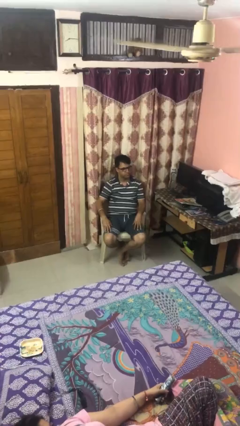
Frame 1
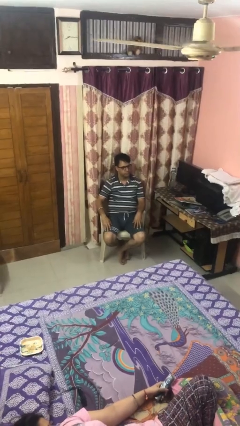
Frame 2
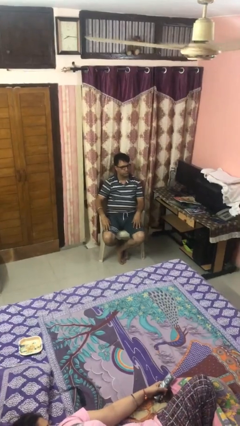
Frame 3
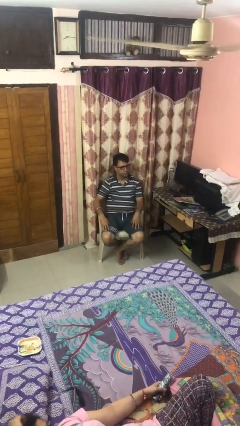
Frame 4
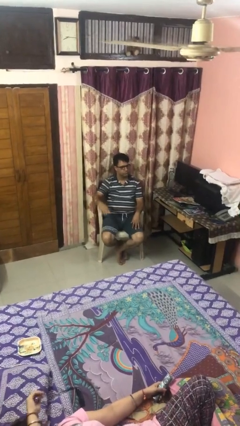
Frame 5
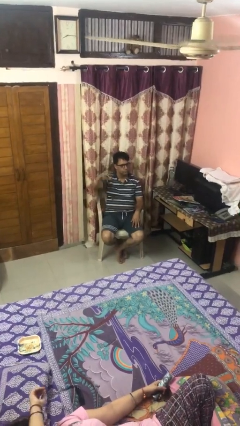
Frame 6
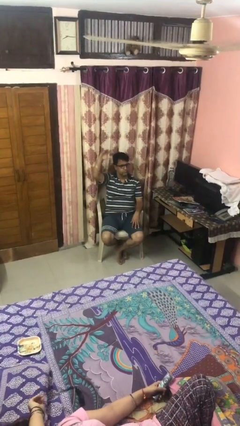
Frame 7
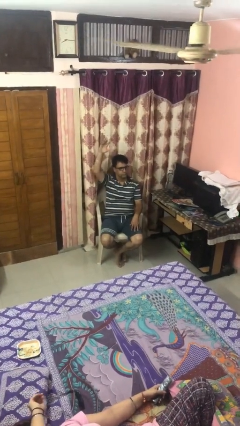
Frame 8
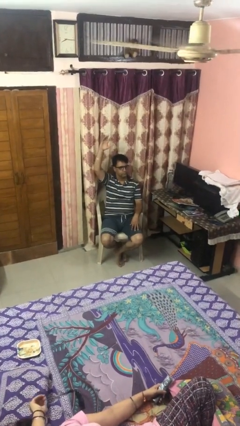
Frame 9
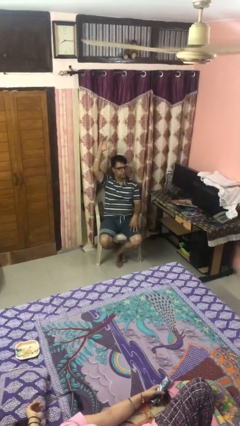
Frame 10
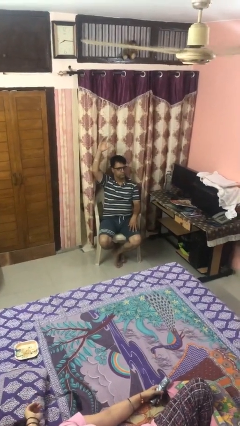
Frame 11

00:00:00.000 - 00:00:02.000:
person gestures raise hand

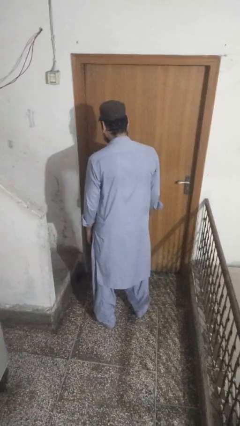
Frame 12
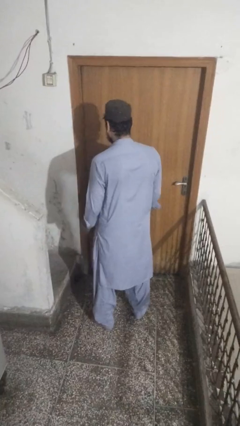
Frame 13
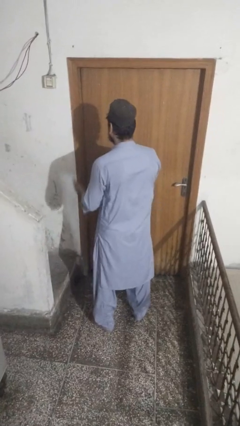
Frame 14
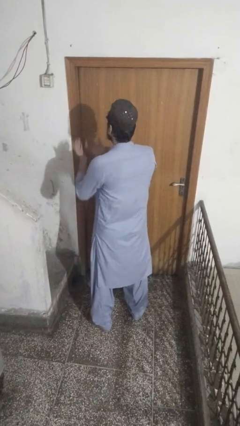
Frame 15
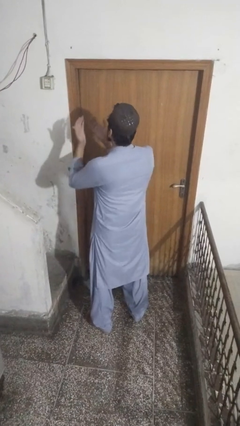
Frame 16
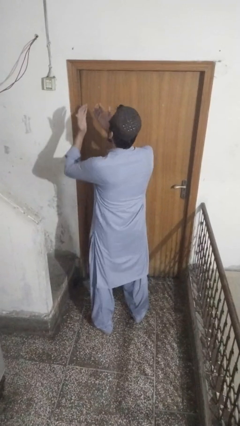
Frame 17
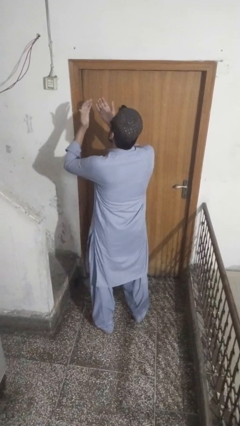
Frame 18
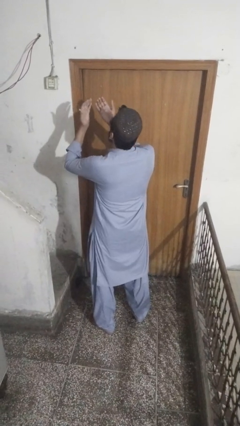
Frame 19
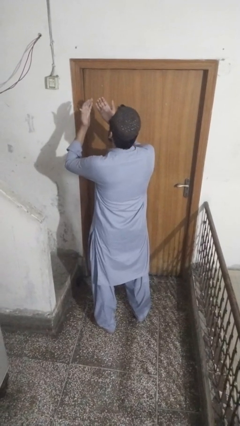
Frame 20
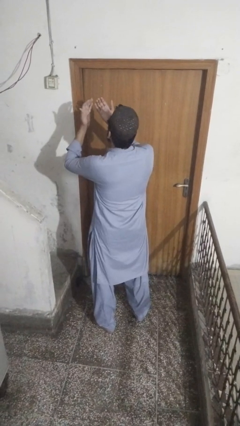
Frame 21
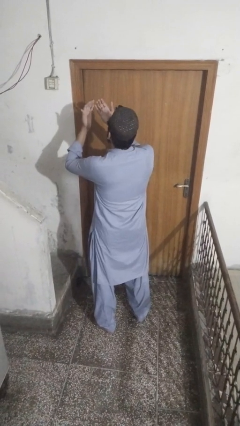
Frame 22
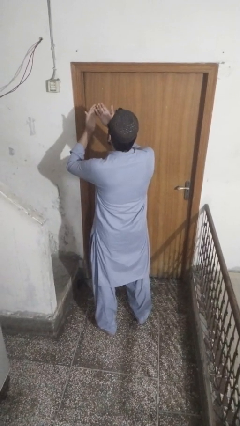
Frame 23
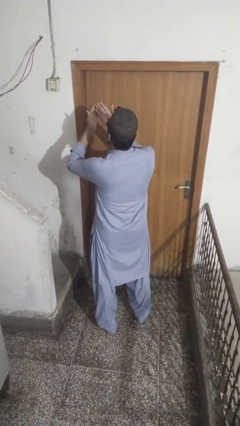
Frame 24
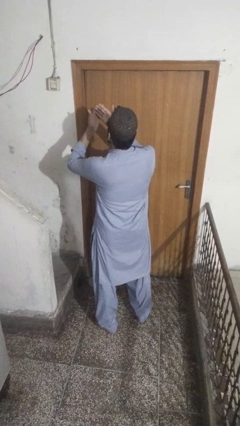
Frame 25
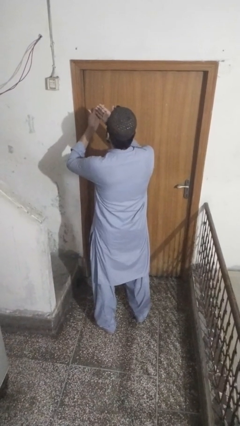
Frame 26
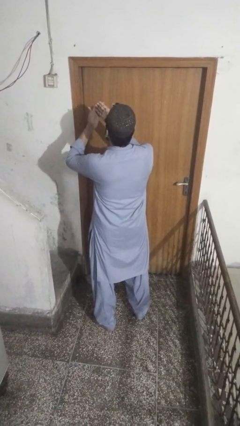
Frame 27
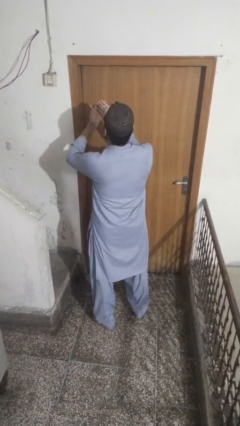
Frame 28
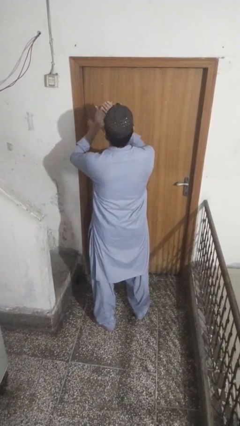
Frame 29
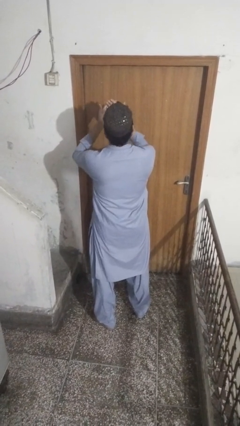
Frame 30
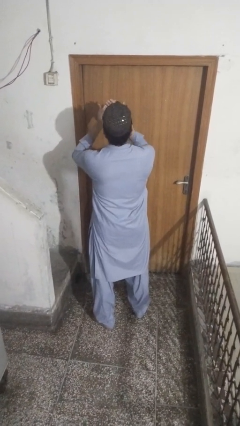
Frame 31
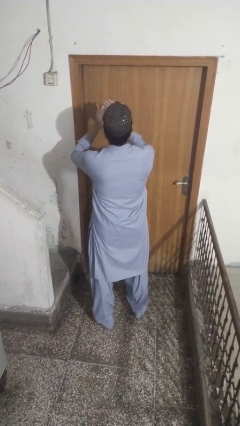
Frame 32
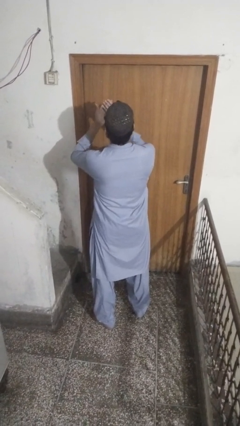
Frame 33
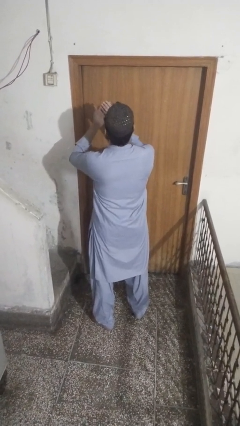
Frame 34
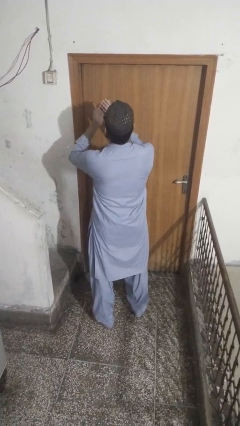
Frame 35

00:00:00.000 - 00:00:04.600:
person prays

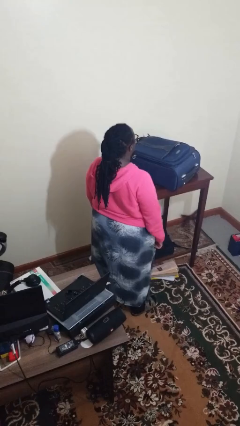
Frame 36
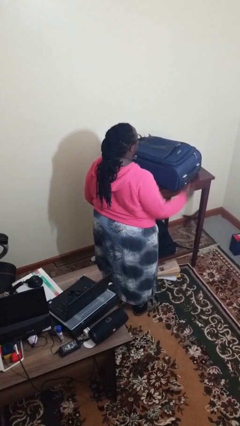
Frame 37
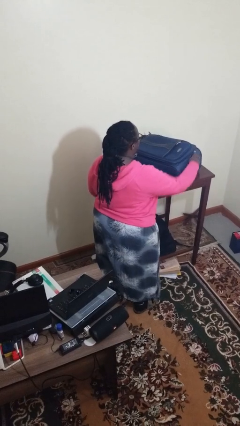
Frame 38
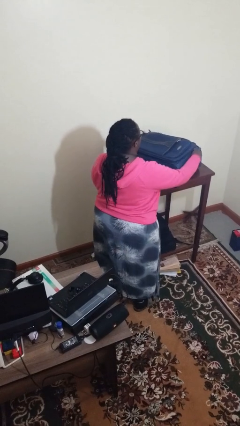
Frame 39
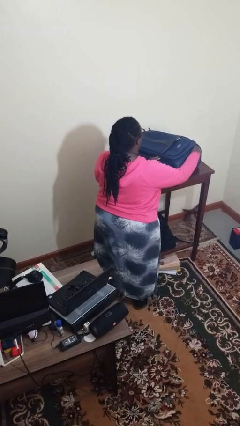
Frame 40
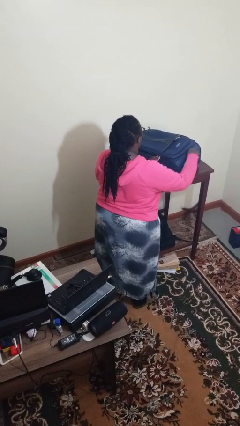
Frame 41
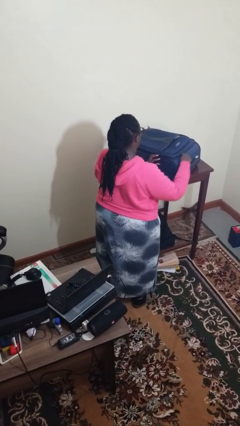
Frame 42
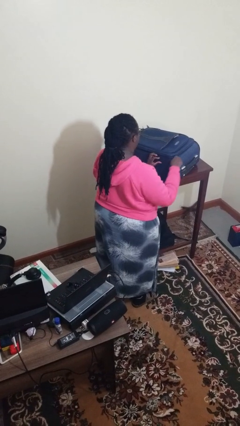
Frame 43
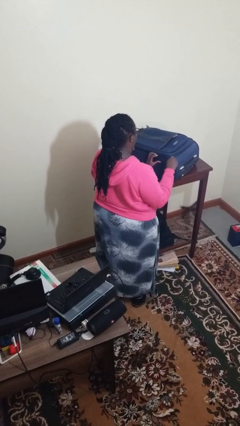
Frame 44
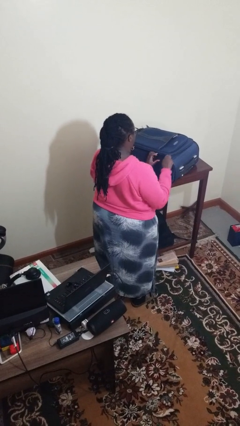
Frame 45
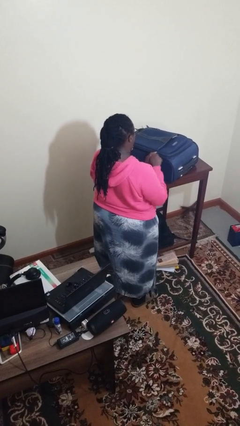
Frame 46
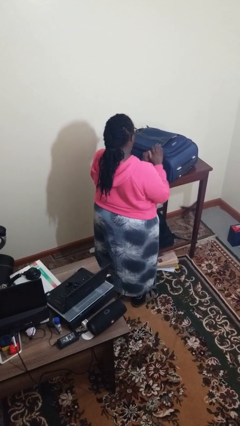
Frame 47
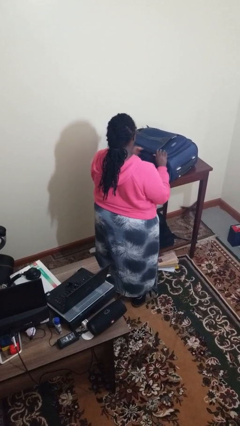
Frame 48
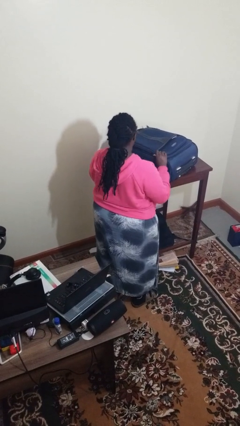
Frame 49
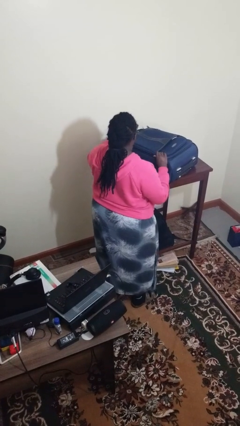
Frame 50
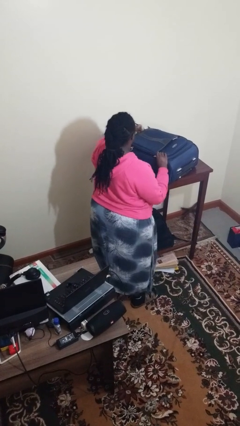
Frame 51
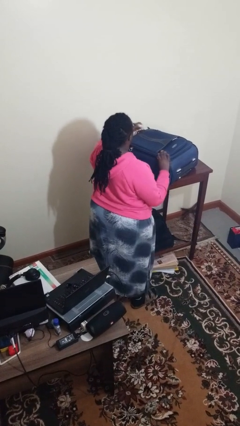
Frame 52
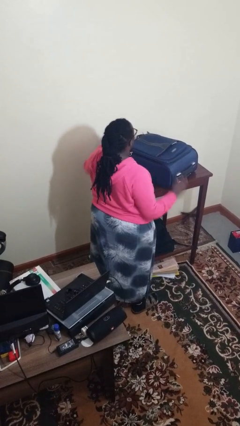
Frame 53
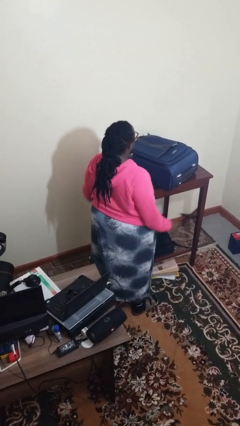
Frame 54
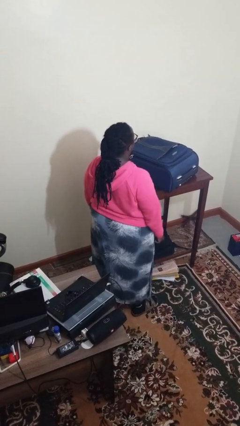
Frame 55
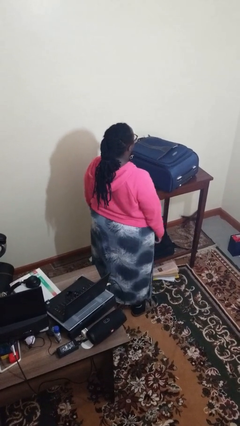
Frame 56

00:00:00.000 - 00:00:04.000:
person closes suitcase

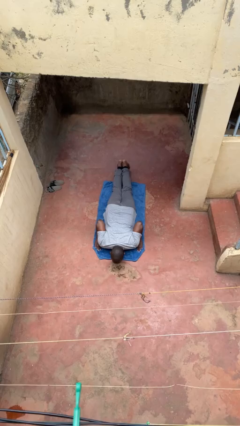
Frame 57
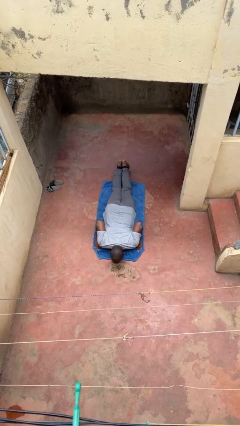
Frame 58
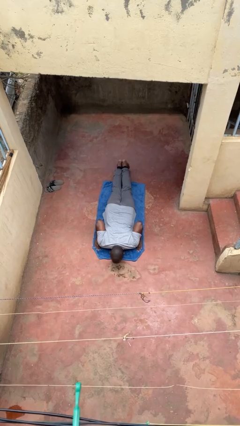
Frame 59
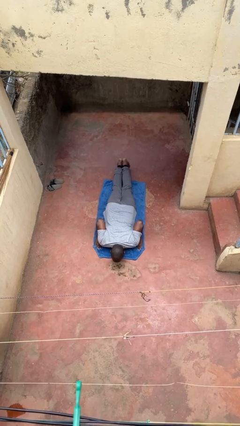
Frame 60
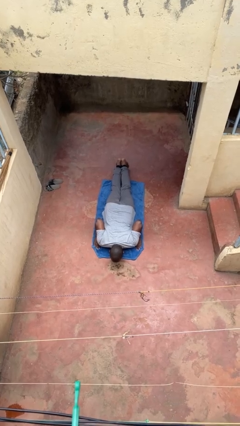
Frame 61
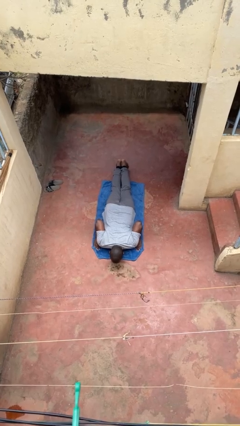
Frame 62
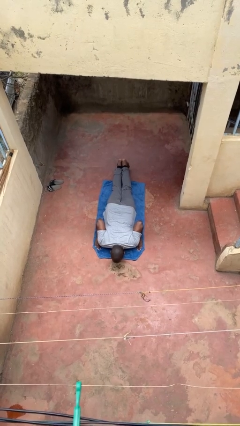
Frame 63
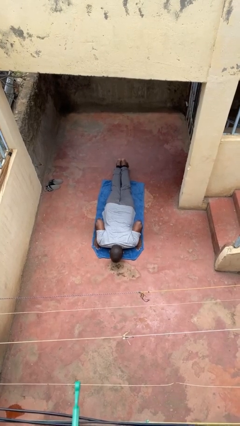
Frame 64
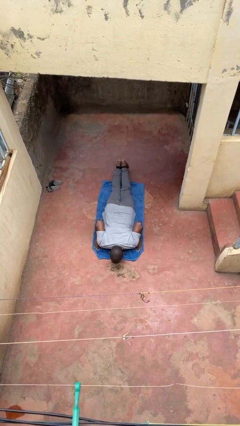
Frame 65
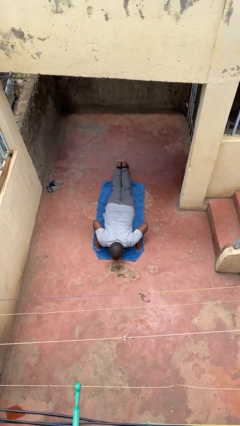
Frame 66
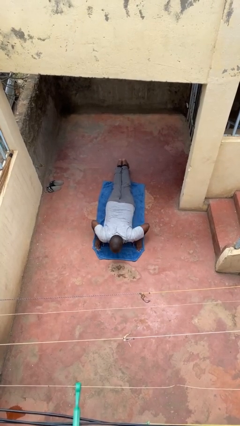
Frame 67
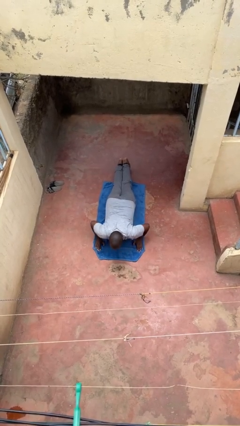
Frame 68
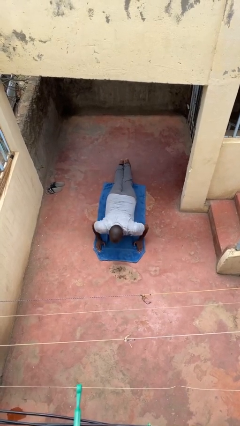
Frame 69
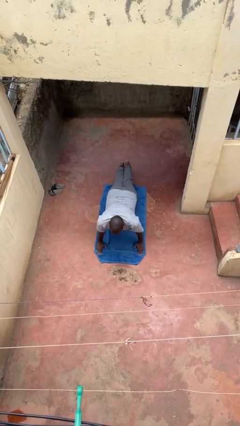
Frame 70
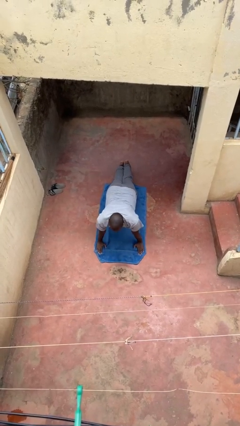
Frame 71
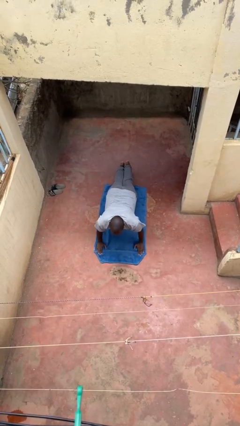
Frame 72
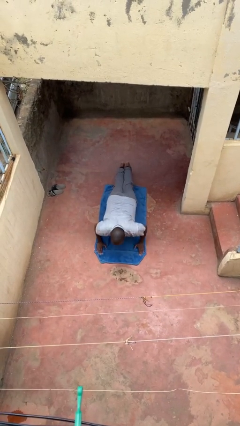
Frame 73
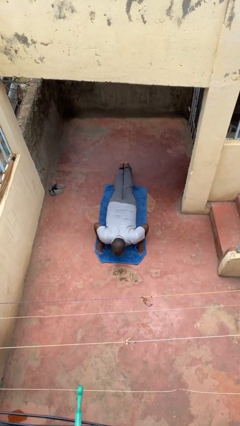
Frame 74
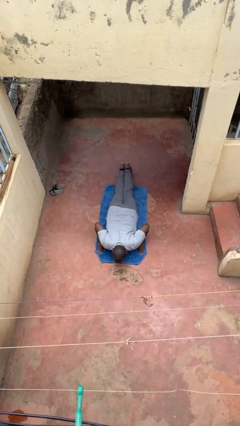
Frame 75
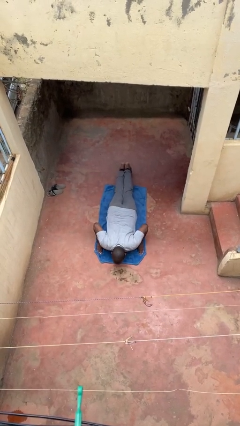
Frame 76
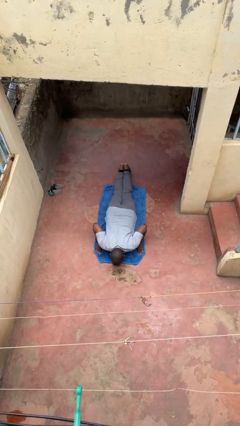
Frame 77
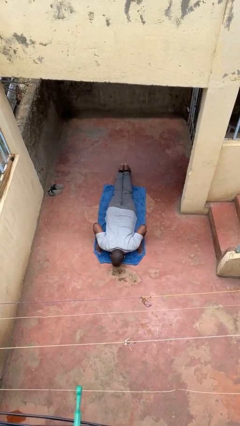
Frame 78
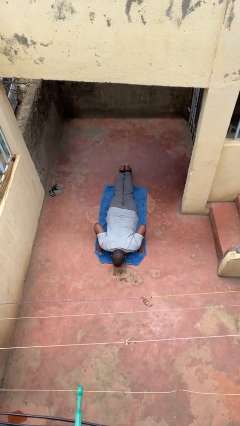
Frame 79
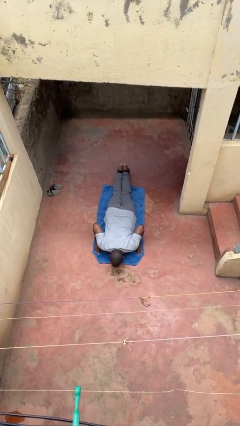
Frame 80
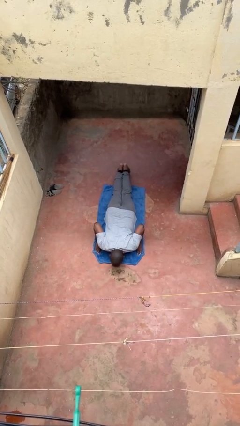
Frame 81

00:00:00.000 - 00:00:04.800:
person exercises with pushup

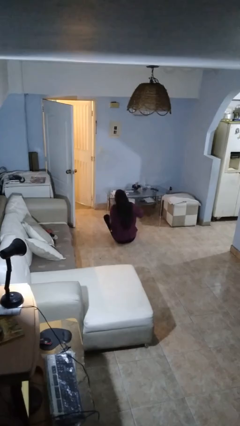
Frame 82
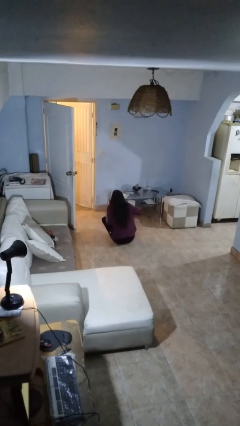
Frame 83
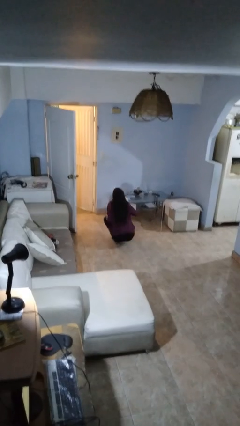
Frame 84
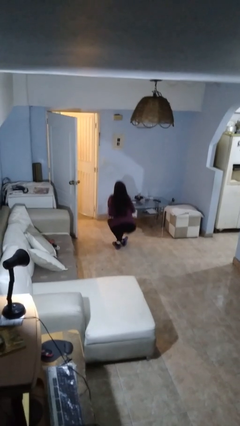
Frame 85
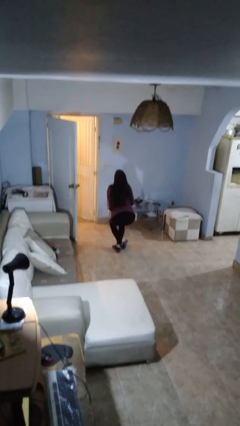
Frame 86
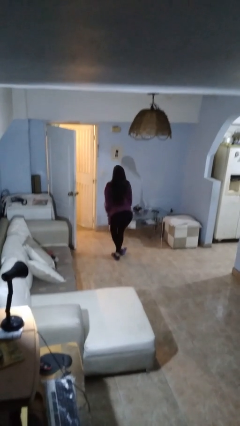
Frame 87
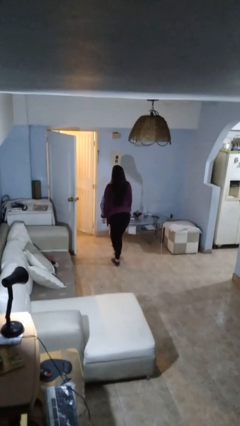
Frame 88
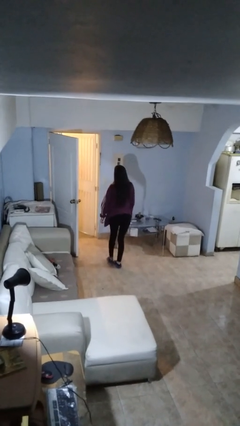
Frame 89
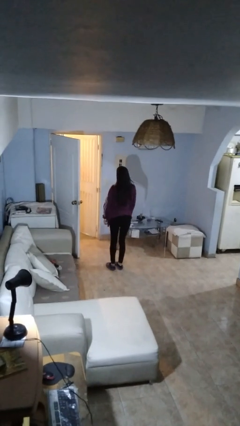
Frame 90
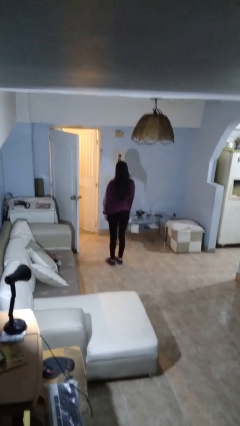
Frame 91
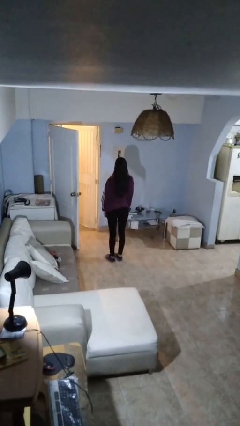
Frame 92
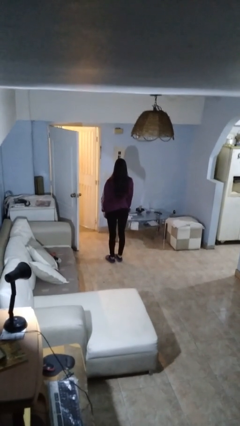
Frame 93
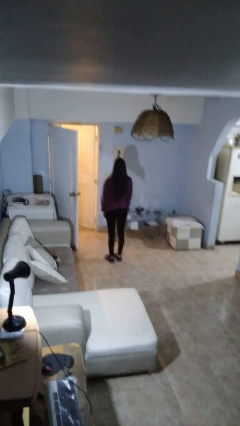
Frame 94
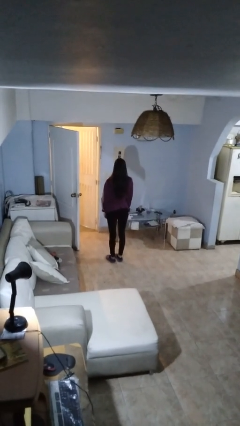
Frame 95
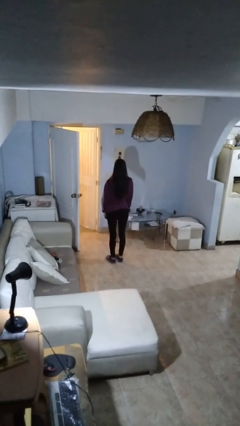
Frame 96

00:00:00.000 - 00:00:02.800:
person stands up from floor
